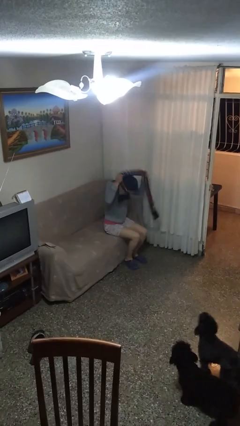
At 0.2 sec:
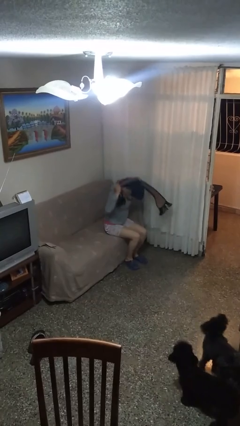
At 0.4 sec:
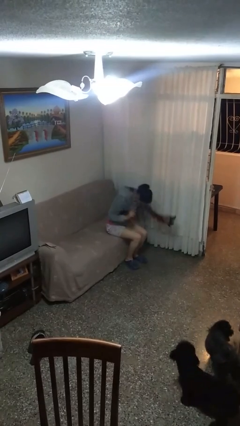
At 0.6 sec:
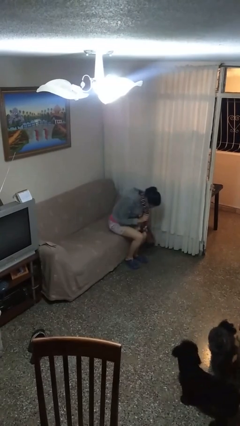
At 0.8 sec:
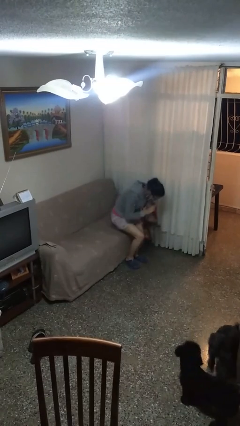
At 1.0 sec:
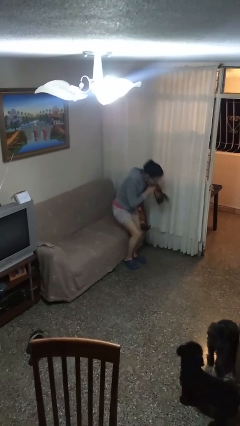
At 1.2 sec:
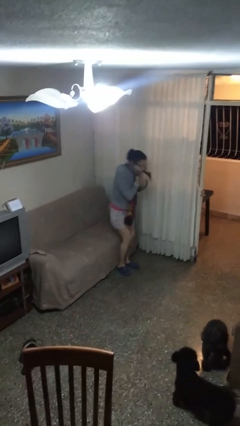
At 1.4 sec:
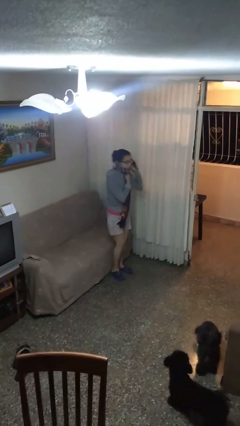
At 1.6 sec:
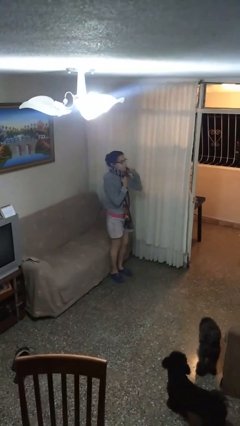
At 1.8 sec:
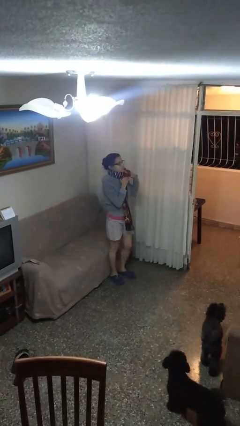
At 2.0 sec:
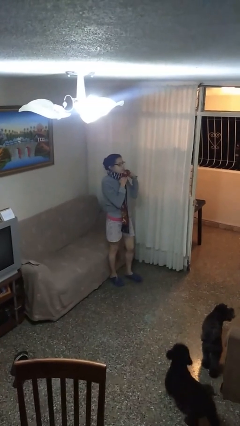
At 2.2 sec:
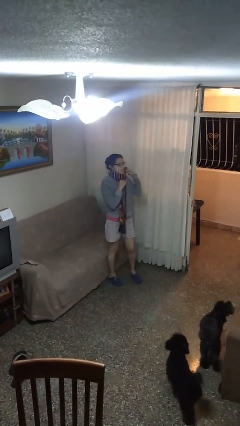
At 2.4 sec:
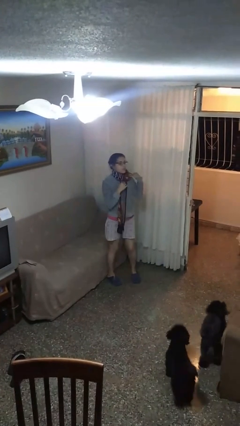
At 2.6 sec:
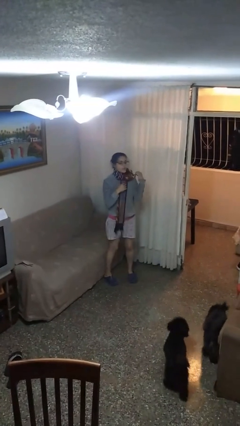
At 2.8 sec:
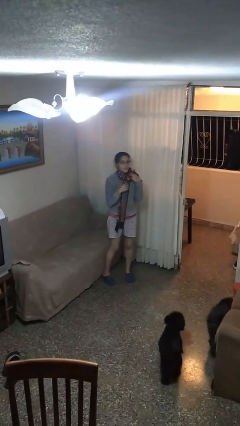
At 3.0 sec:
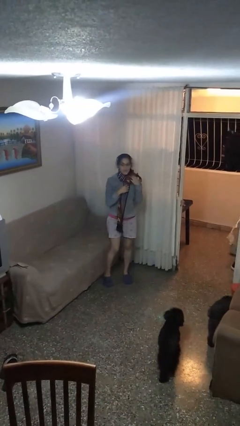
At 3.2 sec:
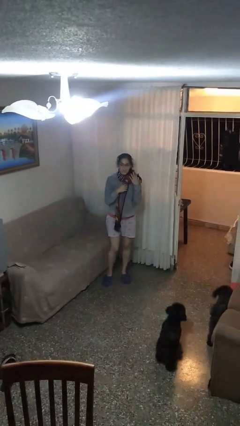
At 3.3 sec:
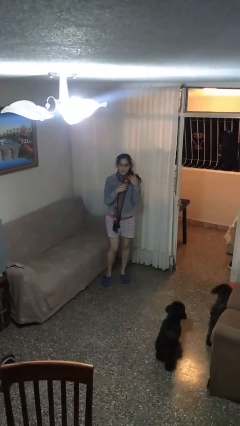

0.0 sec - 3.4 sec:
person puts on scarf

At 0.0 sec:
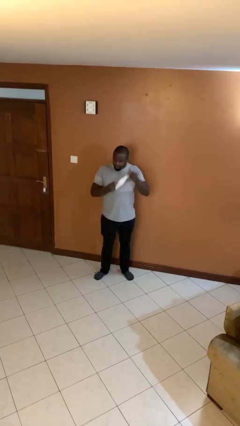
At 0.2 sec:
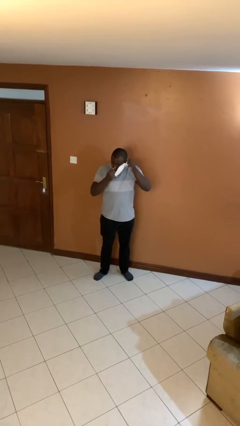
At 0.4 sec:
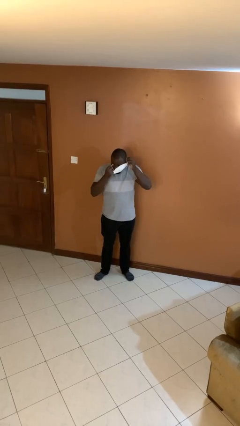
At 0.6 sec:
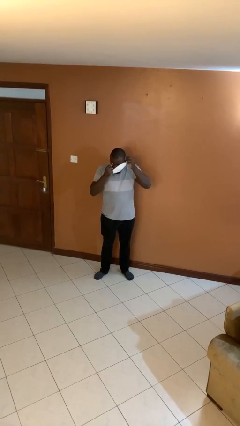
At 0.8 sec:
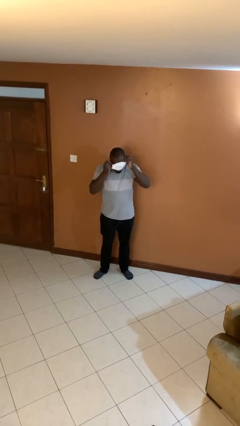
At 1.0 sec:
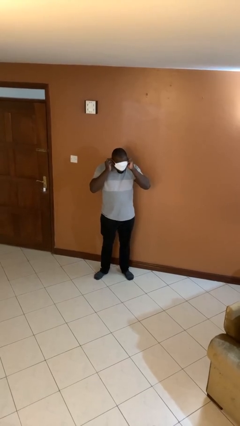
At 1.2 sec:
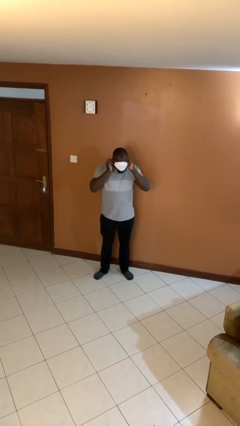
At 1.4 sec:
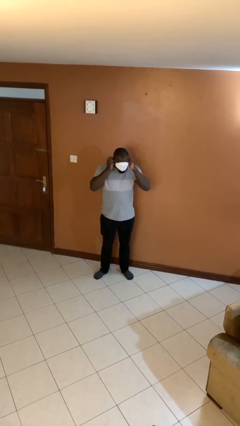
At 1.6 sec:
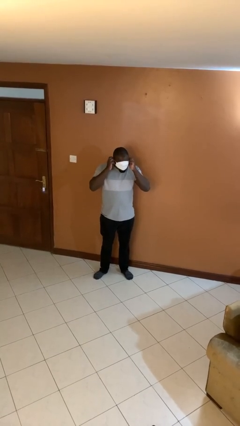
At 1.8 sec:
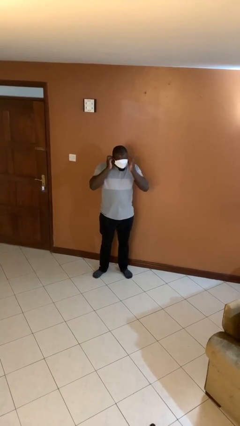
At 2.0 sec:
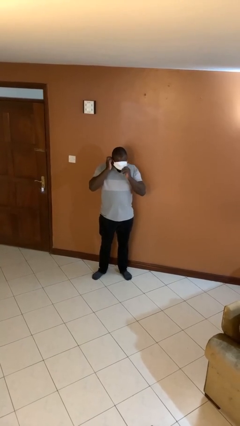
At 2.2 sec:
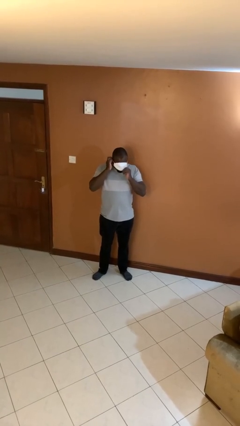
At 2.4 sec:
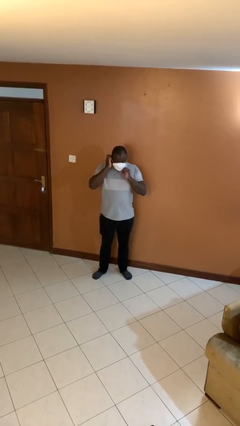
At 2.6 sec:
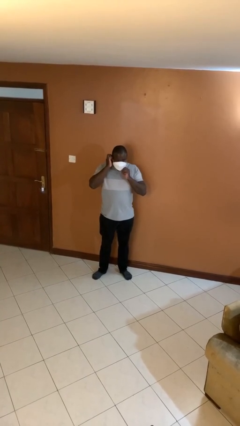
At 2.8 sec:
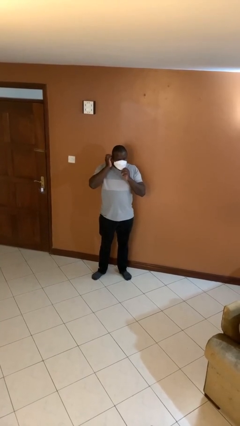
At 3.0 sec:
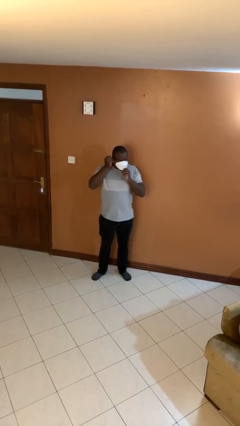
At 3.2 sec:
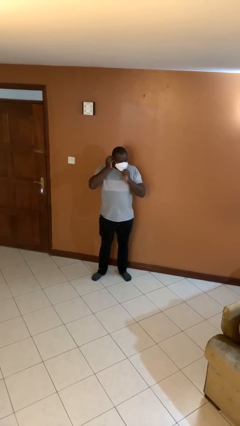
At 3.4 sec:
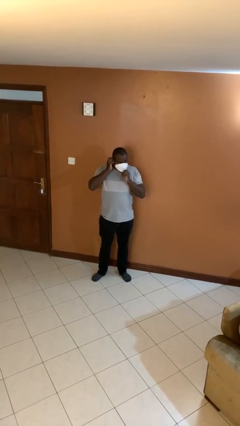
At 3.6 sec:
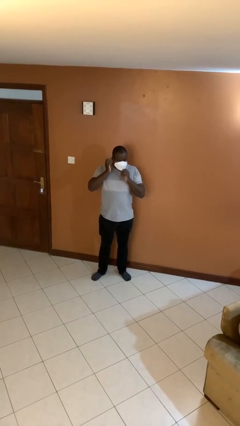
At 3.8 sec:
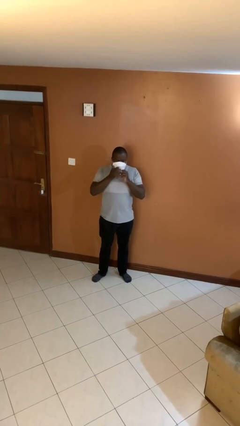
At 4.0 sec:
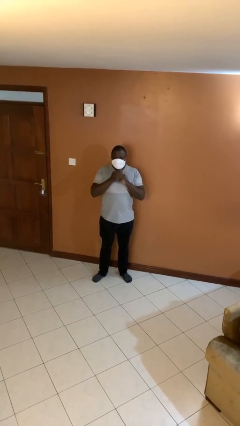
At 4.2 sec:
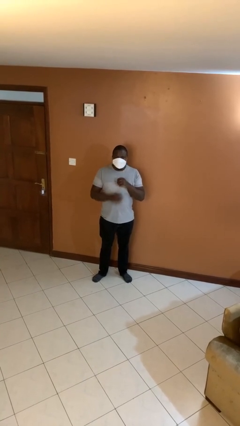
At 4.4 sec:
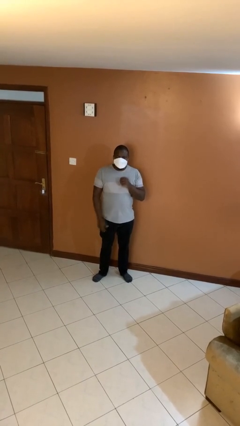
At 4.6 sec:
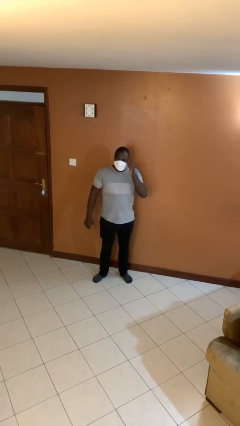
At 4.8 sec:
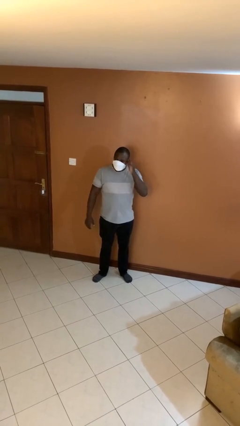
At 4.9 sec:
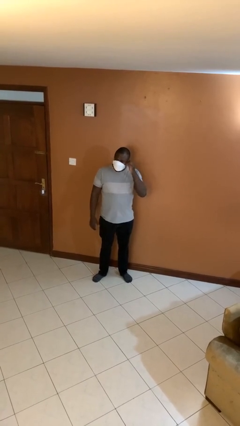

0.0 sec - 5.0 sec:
person puts on facemask

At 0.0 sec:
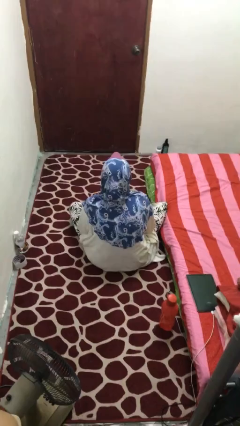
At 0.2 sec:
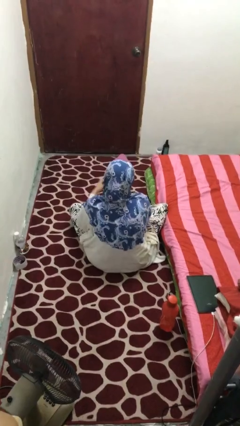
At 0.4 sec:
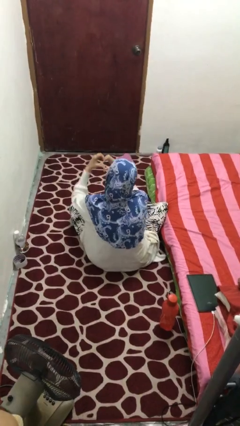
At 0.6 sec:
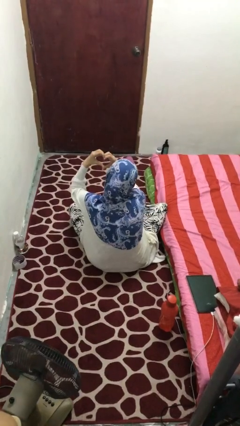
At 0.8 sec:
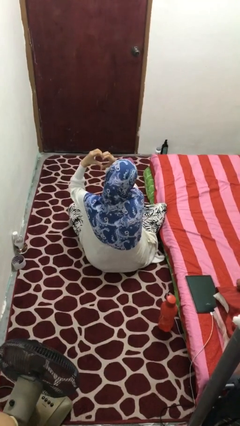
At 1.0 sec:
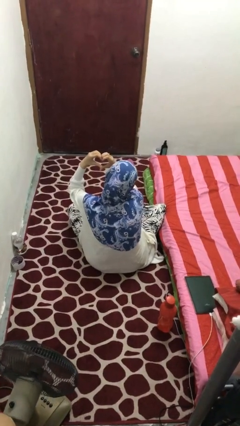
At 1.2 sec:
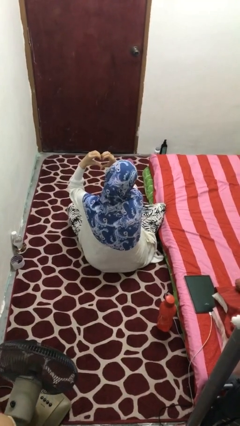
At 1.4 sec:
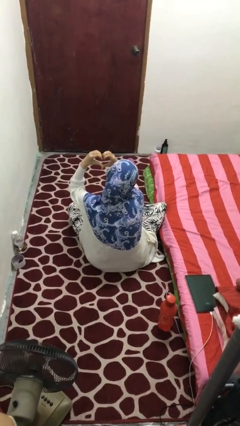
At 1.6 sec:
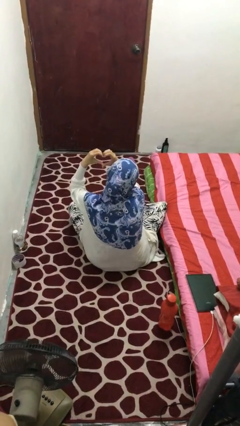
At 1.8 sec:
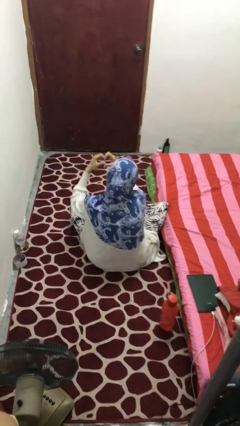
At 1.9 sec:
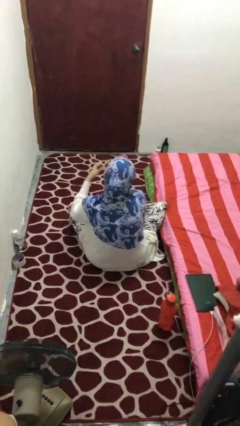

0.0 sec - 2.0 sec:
person gestures heart

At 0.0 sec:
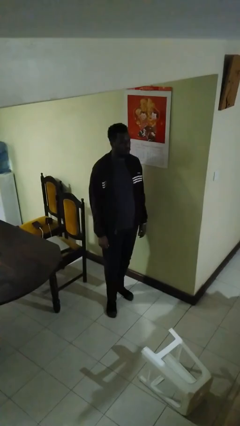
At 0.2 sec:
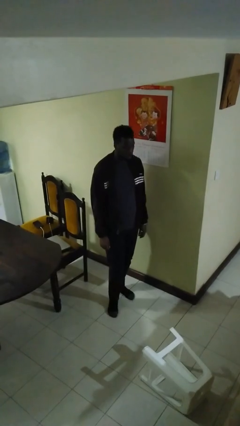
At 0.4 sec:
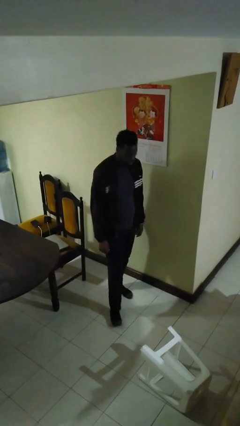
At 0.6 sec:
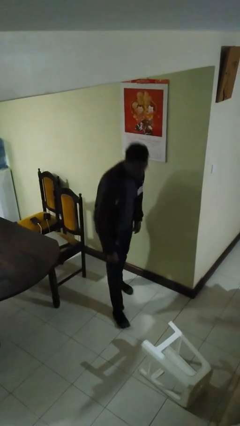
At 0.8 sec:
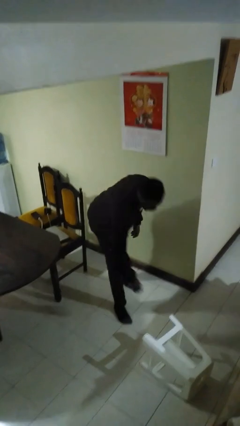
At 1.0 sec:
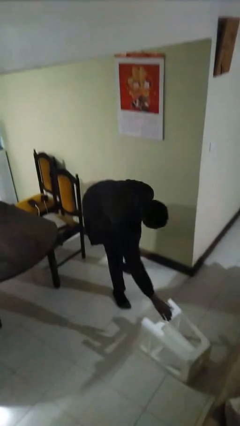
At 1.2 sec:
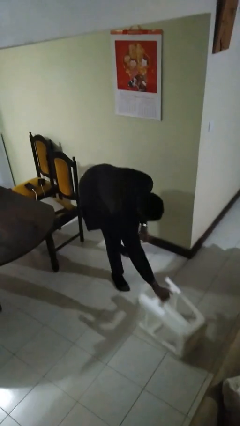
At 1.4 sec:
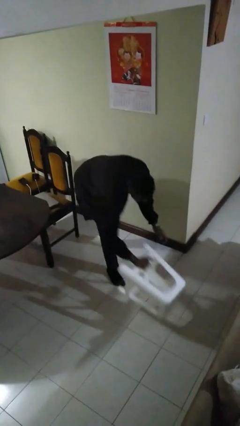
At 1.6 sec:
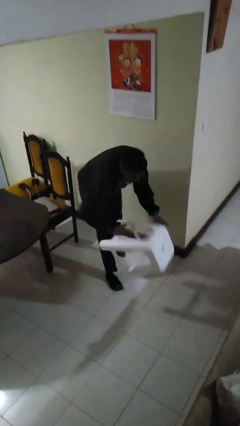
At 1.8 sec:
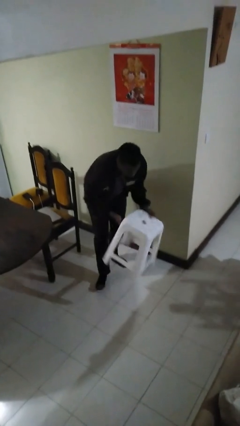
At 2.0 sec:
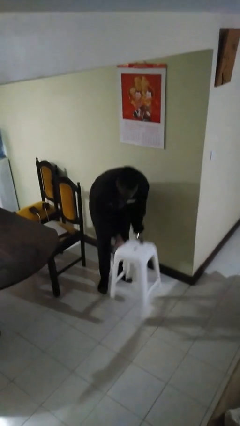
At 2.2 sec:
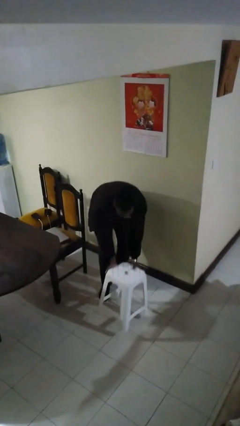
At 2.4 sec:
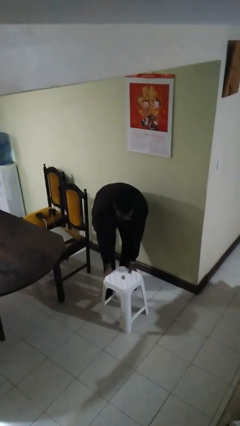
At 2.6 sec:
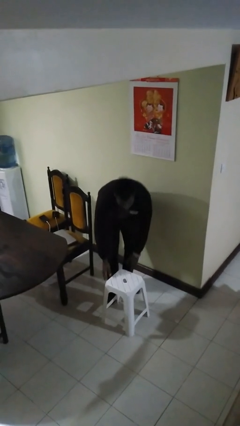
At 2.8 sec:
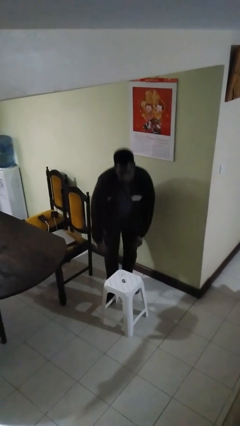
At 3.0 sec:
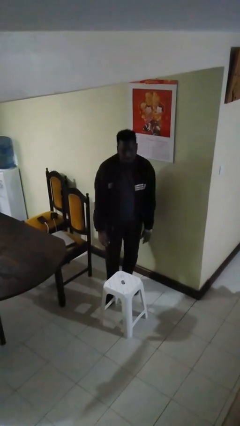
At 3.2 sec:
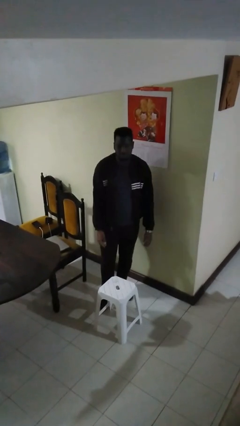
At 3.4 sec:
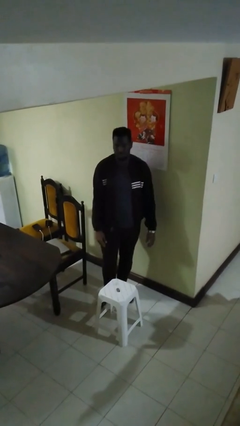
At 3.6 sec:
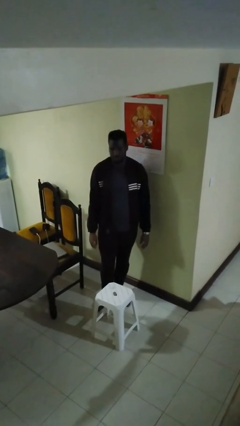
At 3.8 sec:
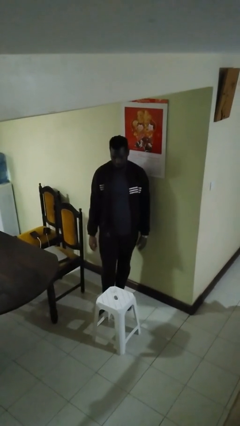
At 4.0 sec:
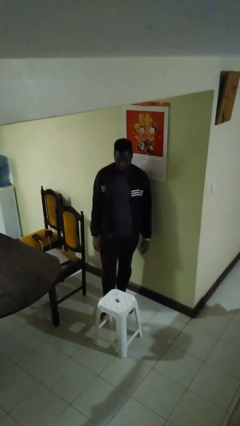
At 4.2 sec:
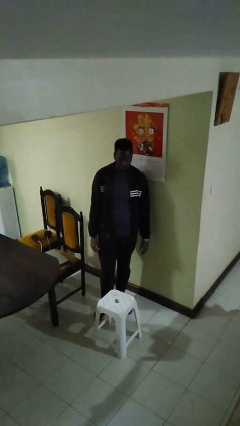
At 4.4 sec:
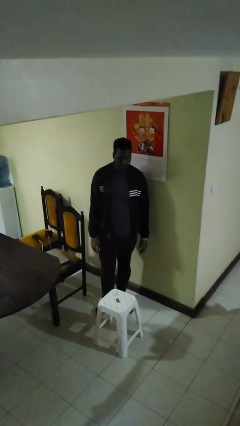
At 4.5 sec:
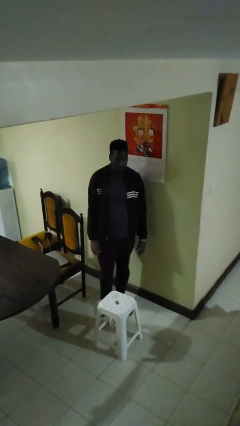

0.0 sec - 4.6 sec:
person sets upright furniture

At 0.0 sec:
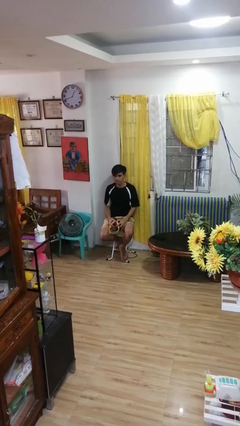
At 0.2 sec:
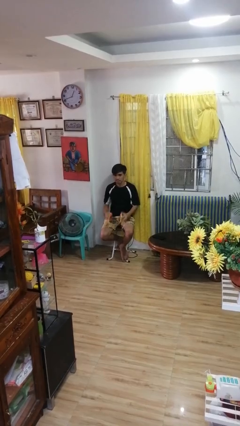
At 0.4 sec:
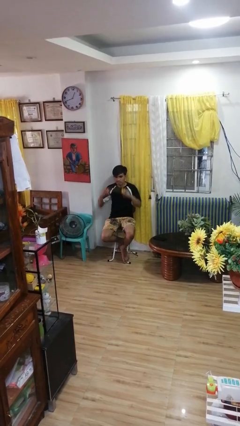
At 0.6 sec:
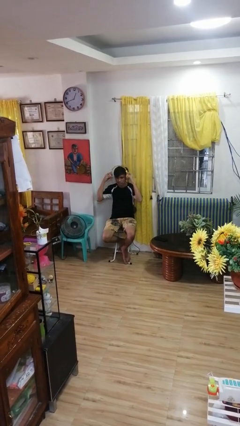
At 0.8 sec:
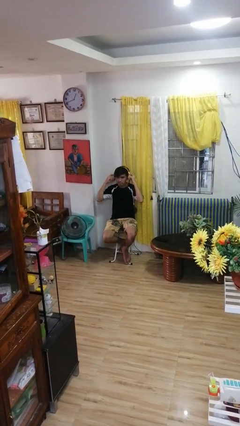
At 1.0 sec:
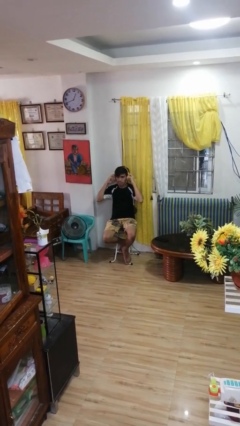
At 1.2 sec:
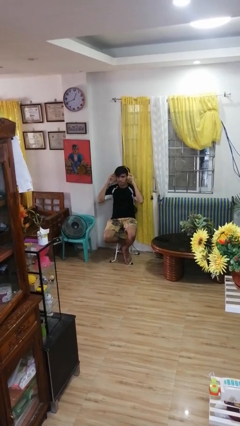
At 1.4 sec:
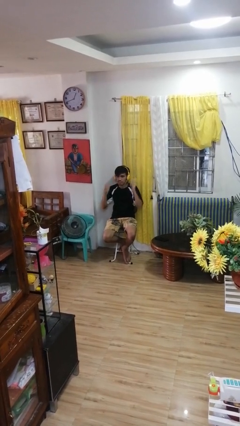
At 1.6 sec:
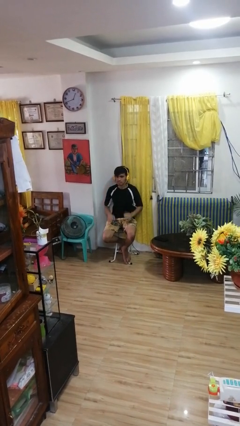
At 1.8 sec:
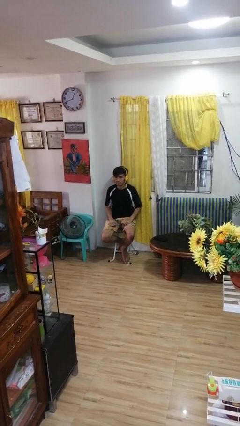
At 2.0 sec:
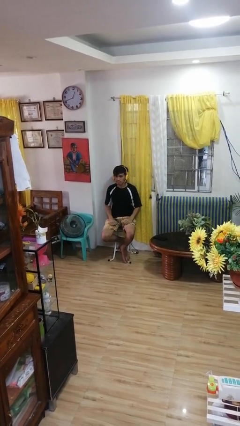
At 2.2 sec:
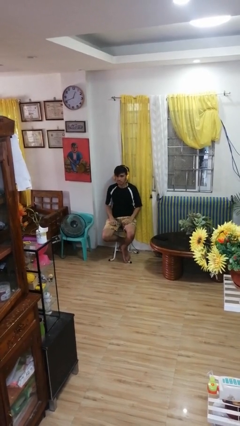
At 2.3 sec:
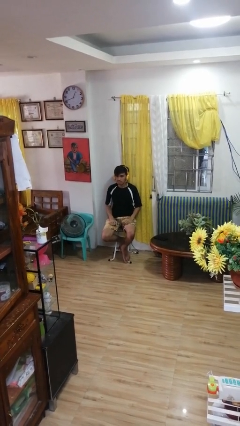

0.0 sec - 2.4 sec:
person puts on headphones
